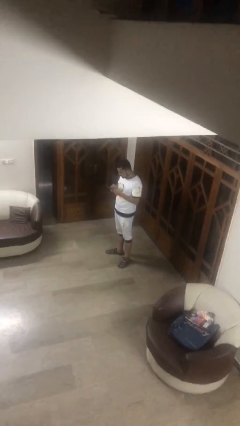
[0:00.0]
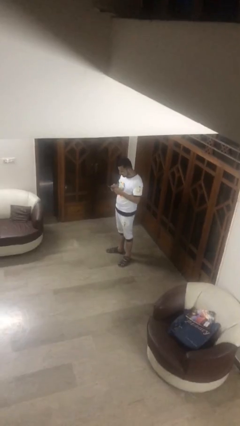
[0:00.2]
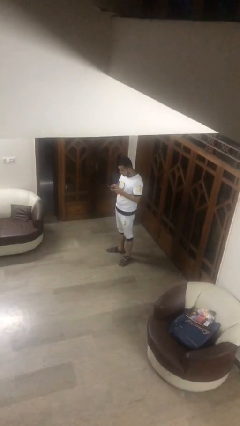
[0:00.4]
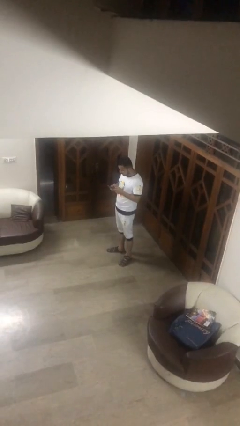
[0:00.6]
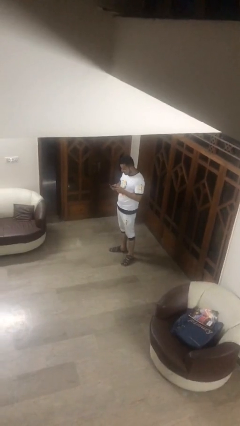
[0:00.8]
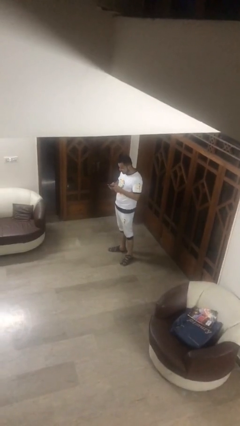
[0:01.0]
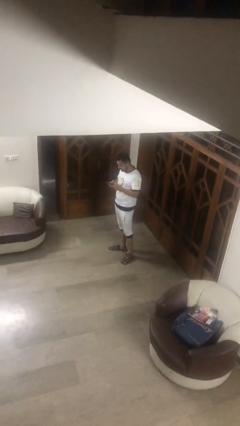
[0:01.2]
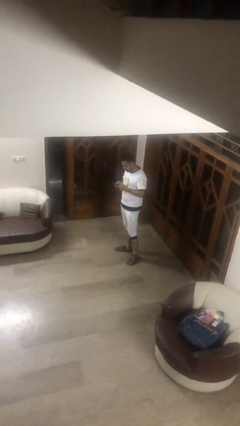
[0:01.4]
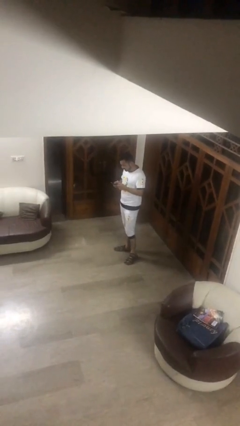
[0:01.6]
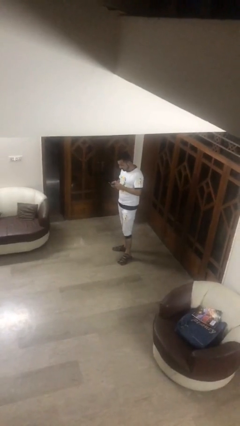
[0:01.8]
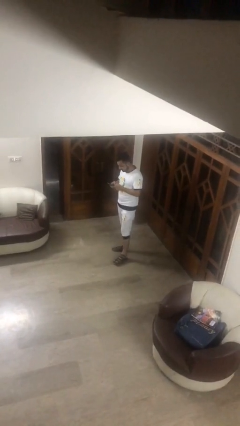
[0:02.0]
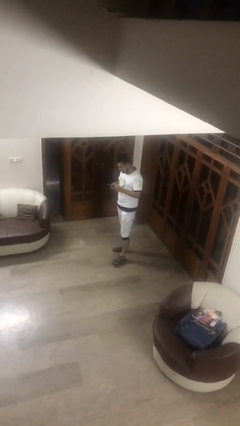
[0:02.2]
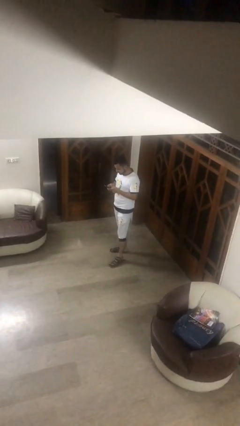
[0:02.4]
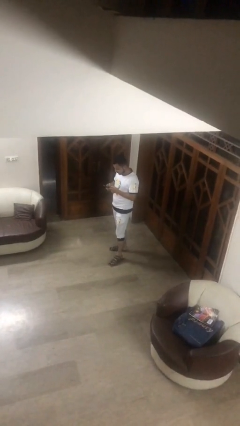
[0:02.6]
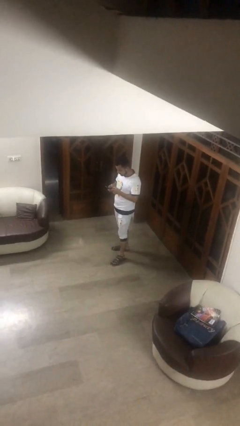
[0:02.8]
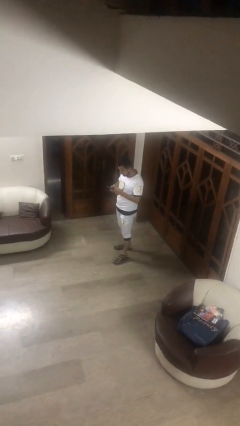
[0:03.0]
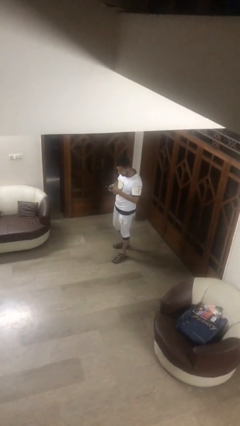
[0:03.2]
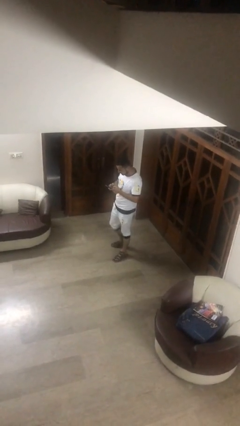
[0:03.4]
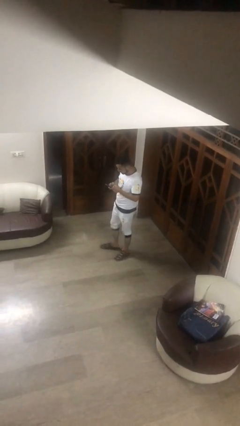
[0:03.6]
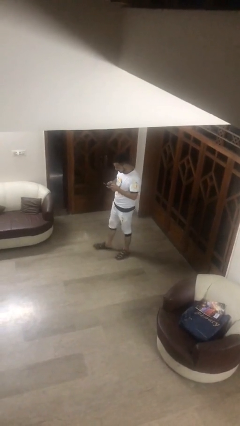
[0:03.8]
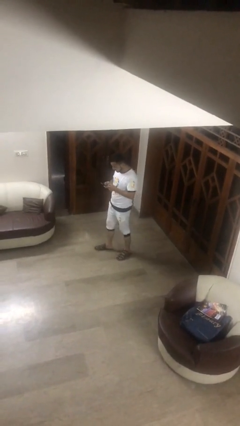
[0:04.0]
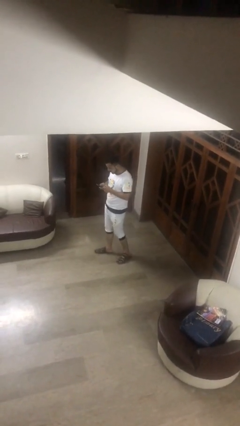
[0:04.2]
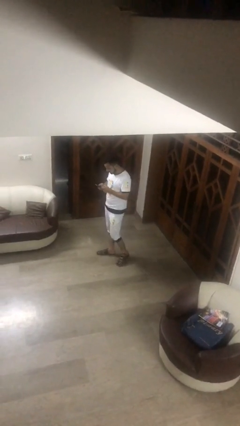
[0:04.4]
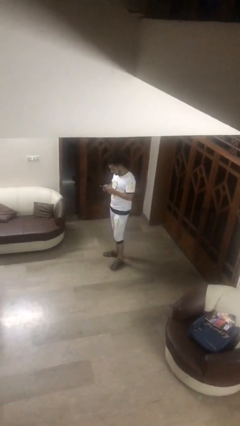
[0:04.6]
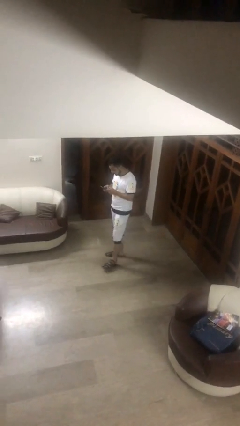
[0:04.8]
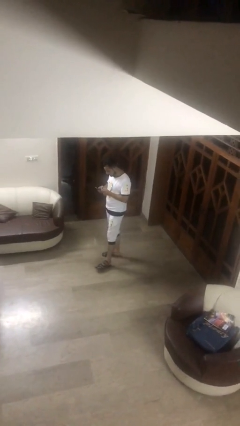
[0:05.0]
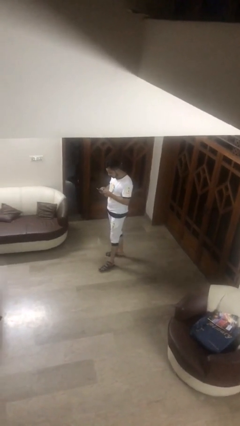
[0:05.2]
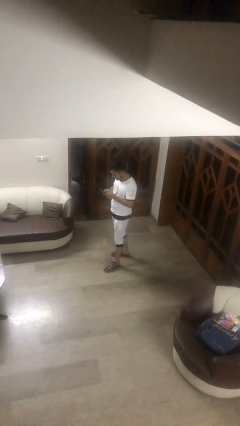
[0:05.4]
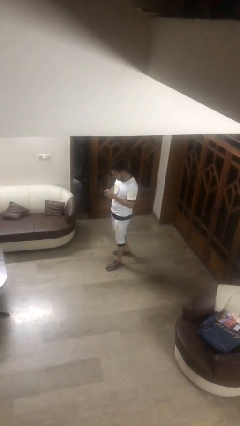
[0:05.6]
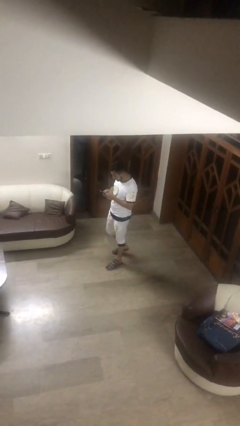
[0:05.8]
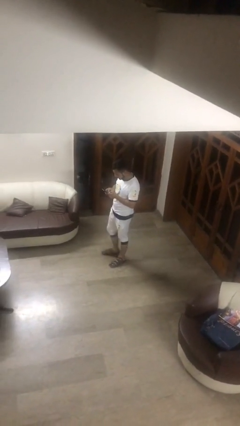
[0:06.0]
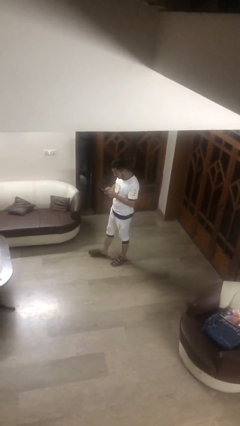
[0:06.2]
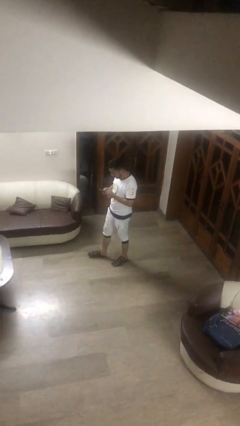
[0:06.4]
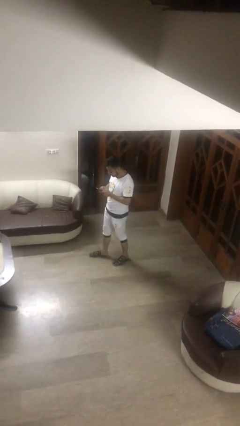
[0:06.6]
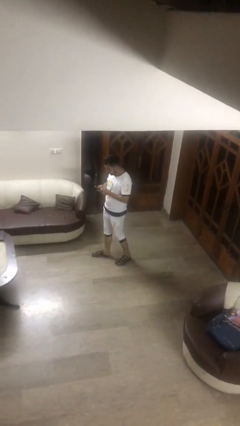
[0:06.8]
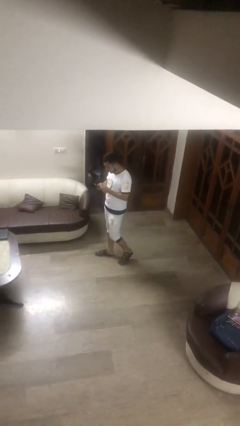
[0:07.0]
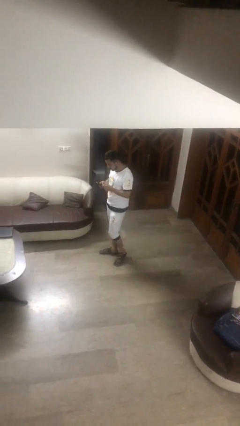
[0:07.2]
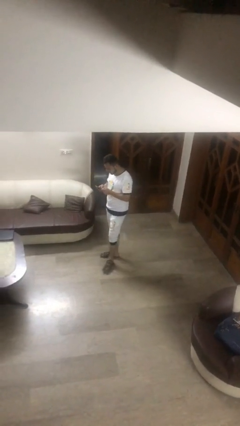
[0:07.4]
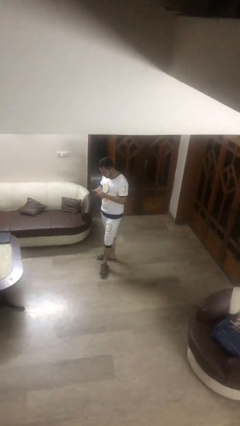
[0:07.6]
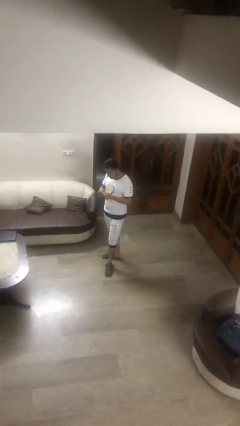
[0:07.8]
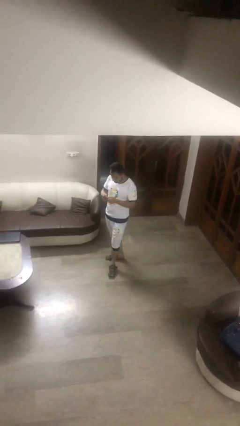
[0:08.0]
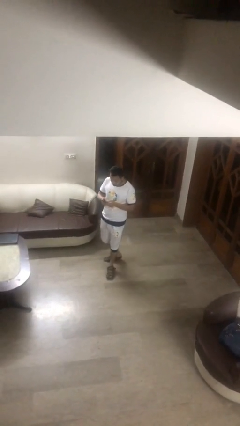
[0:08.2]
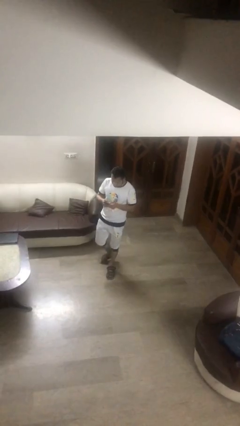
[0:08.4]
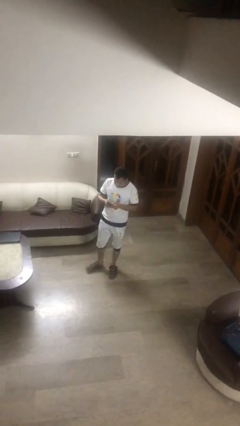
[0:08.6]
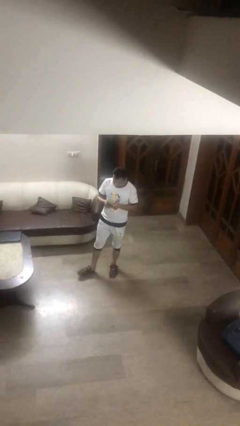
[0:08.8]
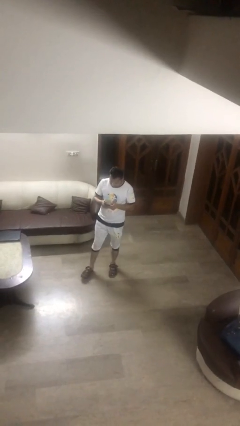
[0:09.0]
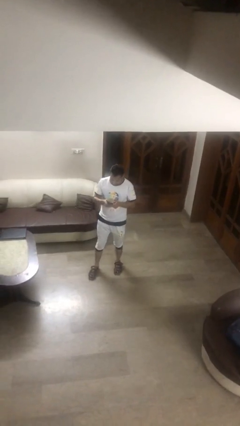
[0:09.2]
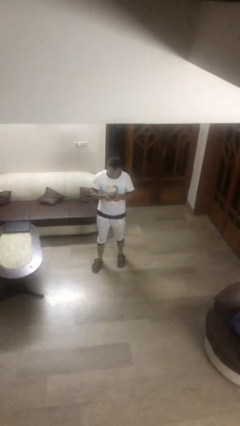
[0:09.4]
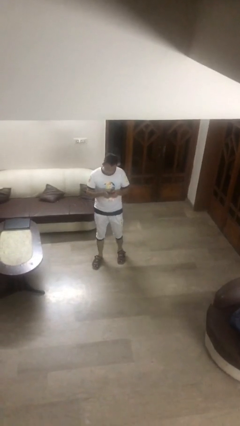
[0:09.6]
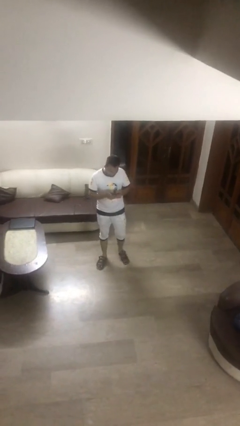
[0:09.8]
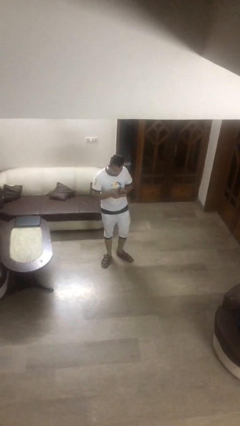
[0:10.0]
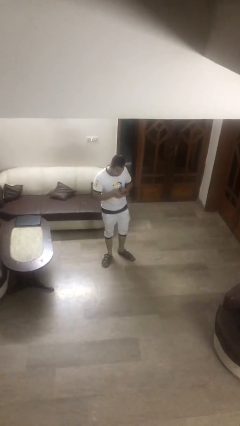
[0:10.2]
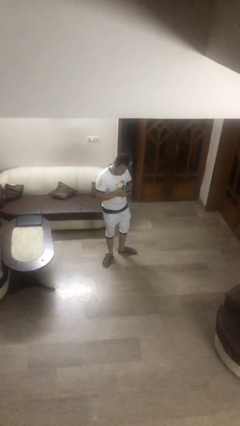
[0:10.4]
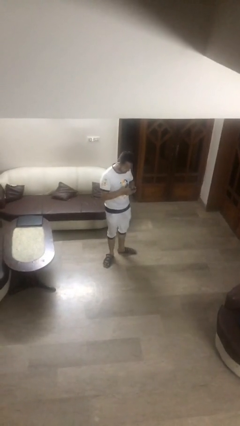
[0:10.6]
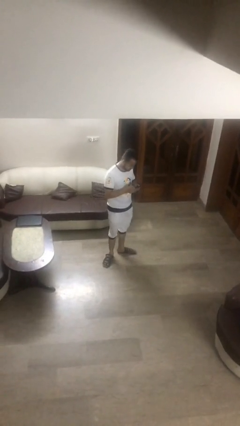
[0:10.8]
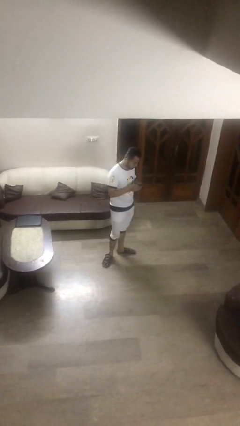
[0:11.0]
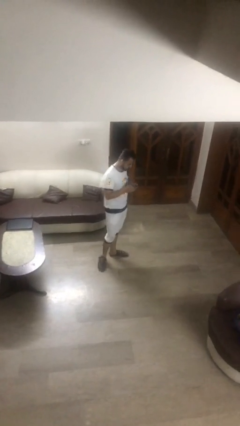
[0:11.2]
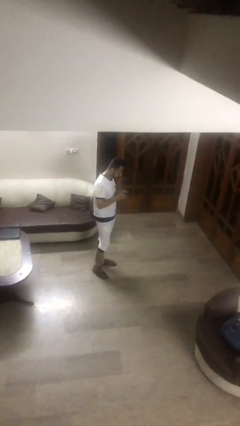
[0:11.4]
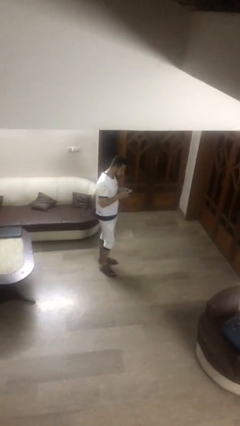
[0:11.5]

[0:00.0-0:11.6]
person texts on phone

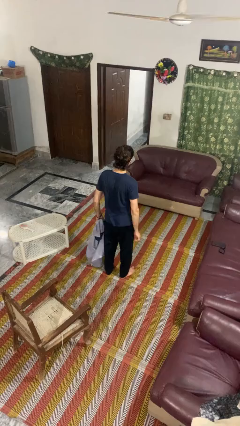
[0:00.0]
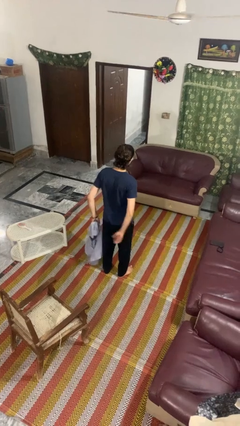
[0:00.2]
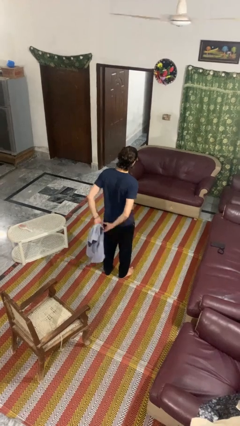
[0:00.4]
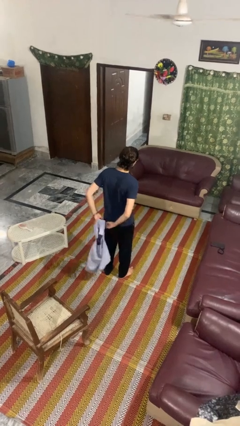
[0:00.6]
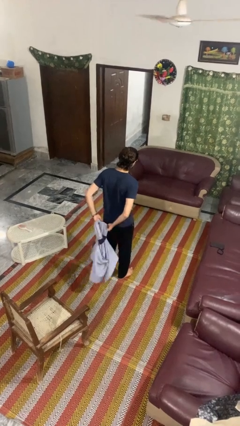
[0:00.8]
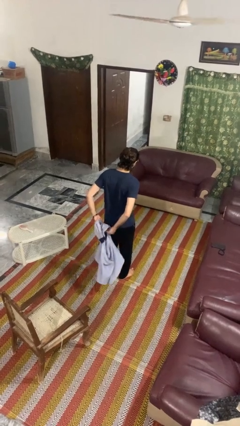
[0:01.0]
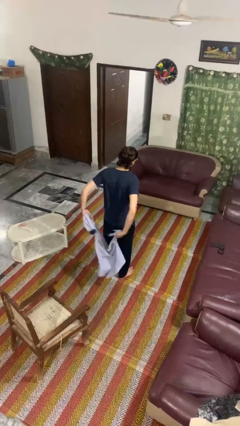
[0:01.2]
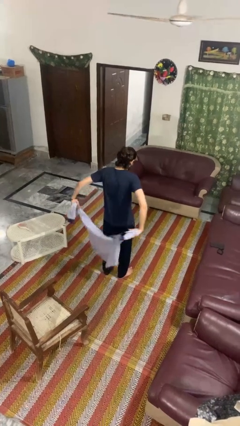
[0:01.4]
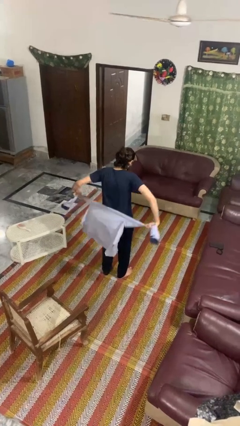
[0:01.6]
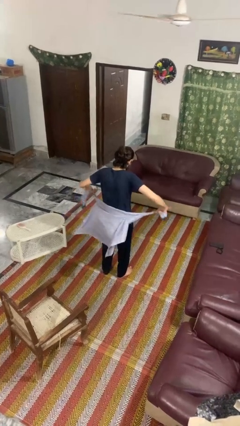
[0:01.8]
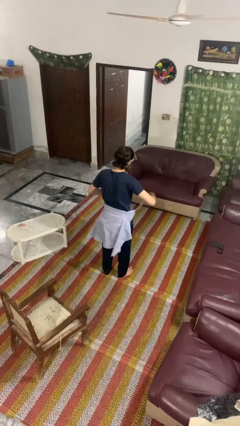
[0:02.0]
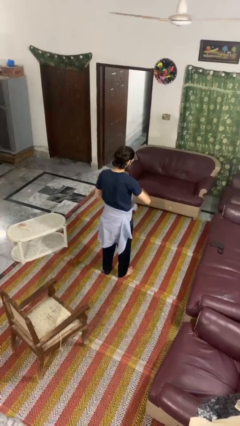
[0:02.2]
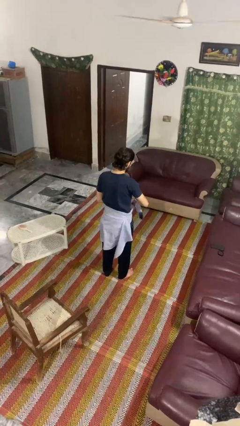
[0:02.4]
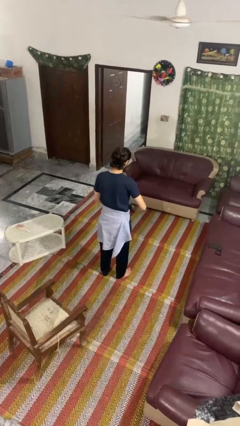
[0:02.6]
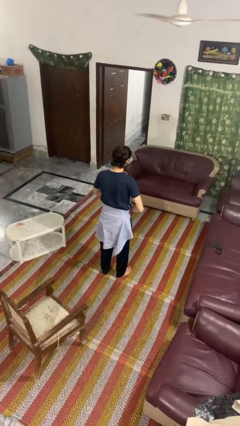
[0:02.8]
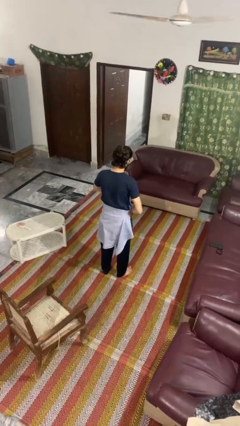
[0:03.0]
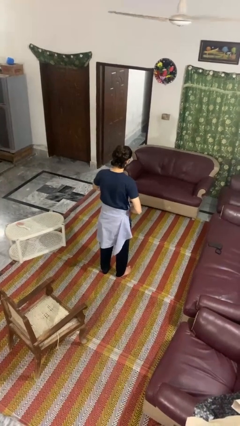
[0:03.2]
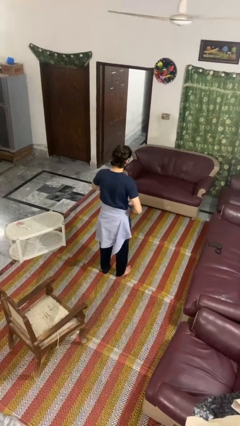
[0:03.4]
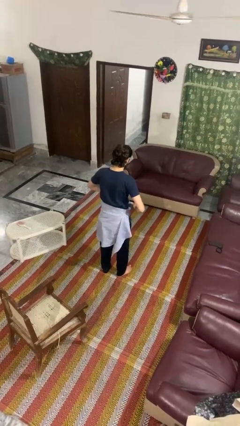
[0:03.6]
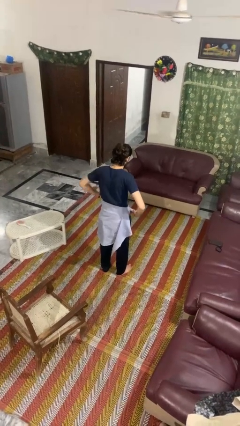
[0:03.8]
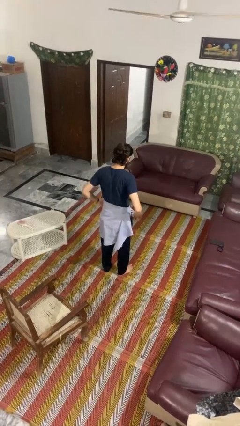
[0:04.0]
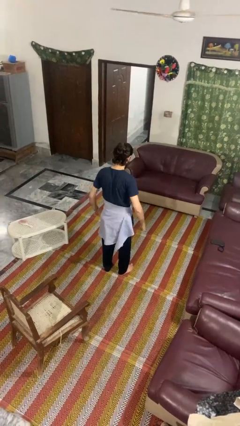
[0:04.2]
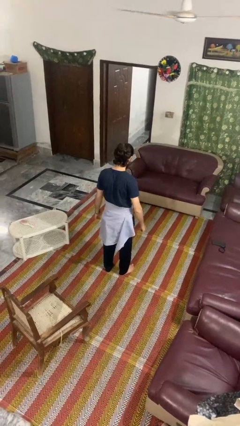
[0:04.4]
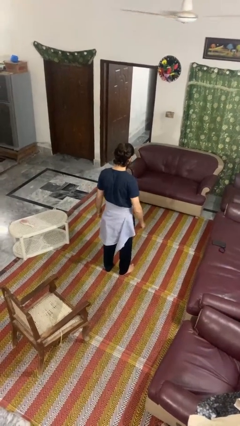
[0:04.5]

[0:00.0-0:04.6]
person ties jacket around waist

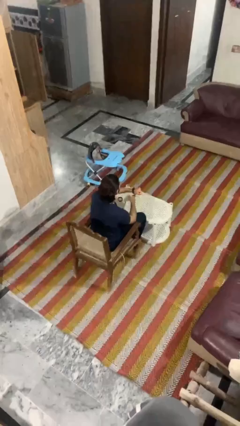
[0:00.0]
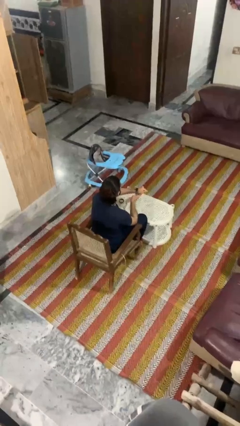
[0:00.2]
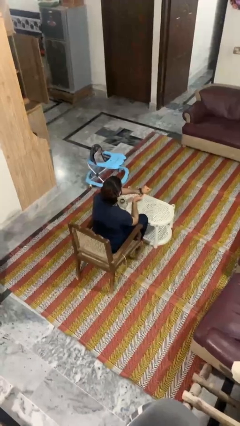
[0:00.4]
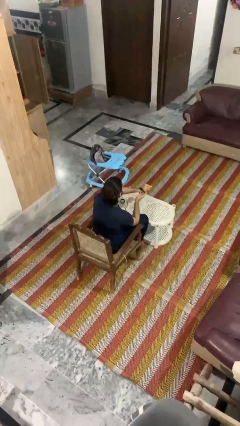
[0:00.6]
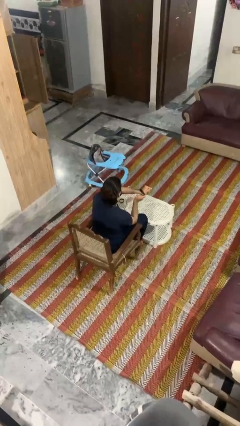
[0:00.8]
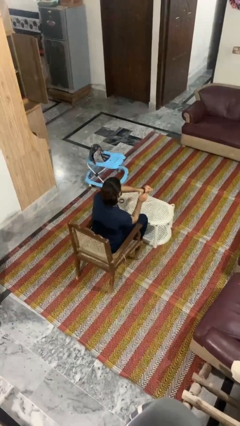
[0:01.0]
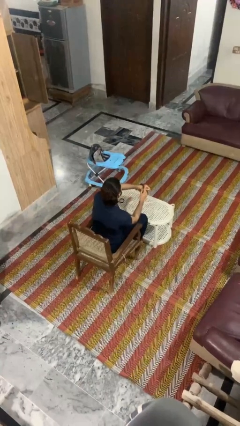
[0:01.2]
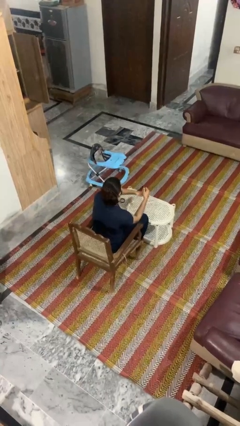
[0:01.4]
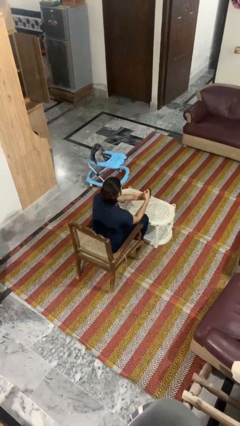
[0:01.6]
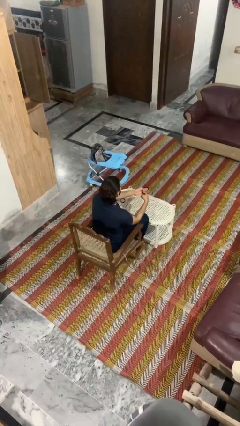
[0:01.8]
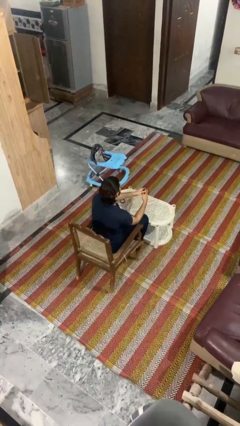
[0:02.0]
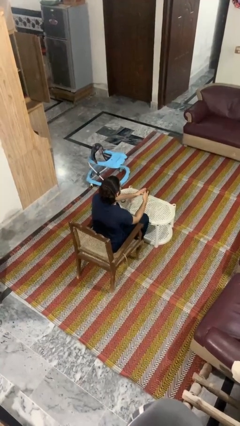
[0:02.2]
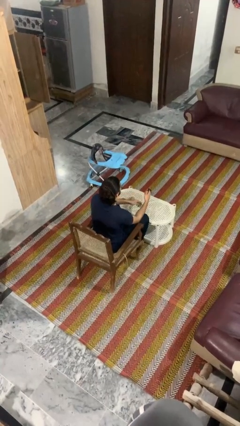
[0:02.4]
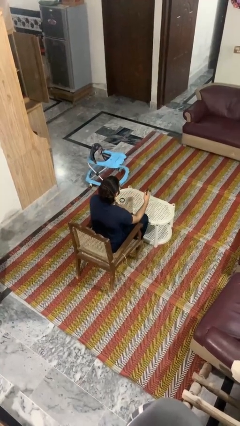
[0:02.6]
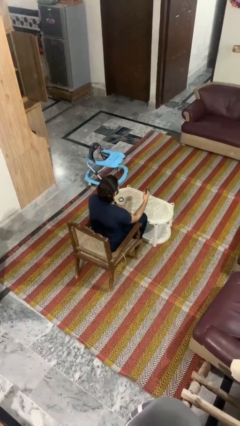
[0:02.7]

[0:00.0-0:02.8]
person takes off wristwatch
